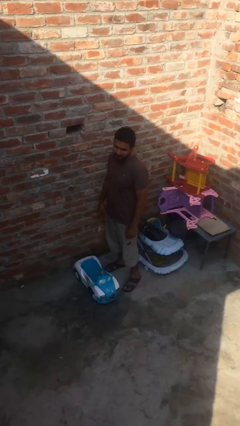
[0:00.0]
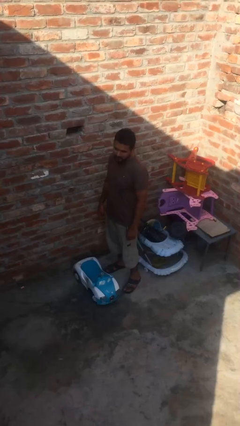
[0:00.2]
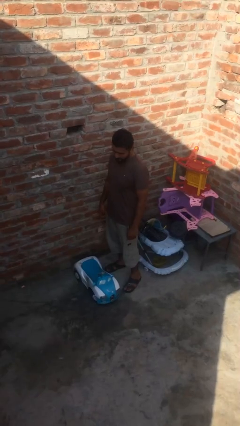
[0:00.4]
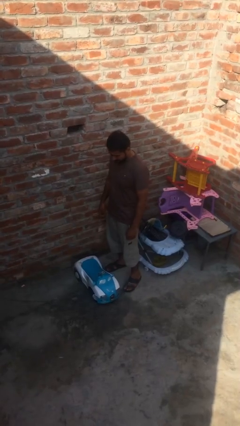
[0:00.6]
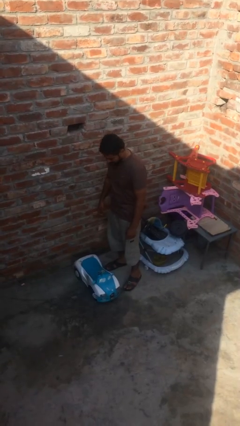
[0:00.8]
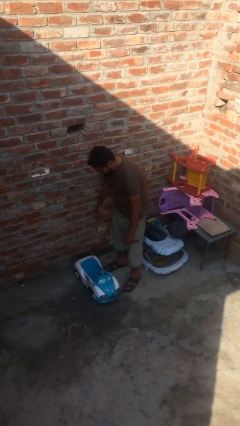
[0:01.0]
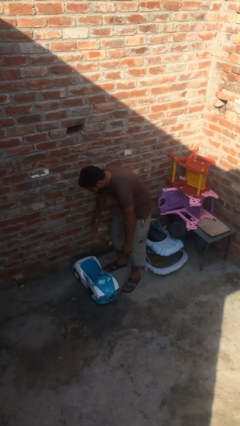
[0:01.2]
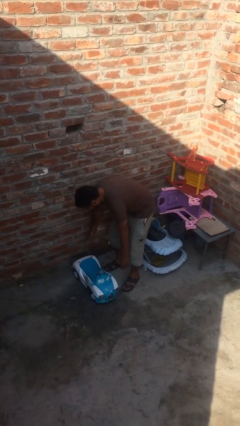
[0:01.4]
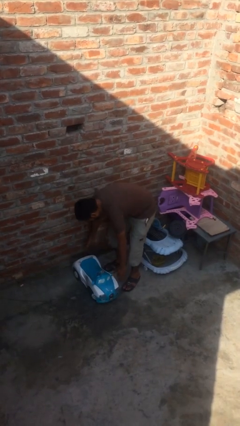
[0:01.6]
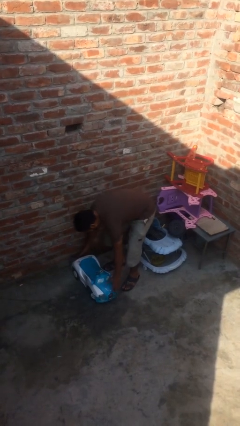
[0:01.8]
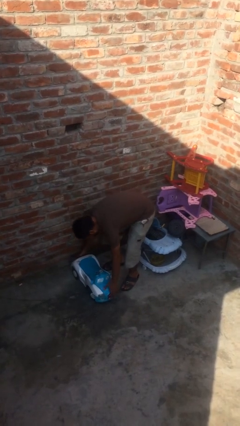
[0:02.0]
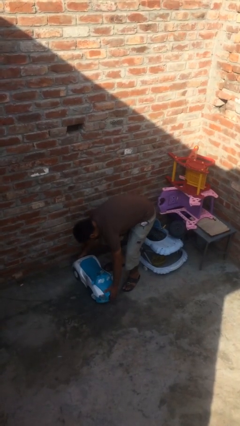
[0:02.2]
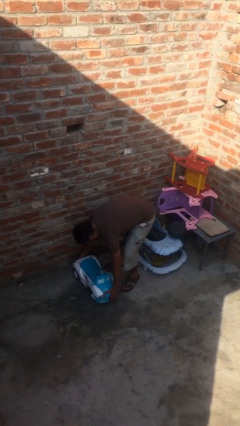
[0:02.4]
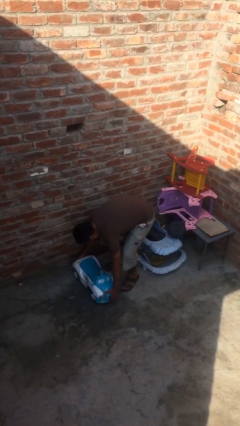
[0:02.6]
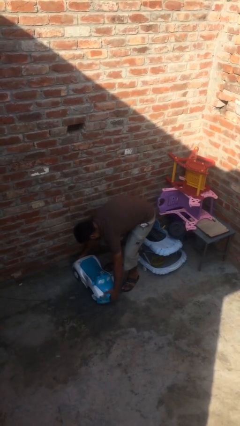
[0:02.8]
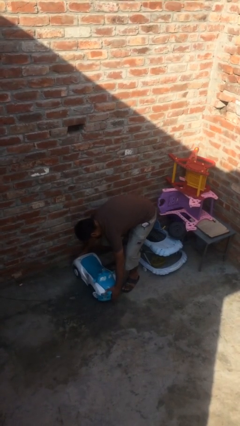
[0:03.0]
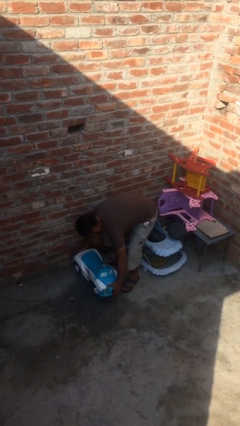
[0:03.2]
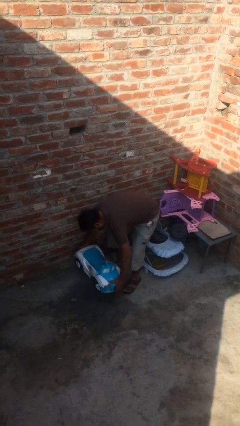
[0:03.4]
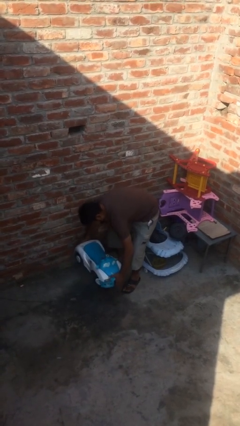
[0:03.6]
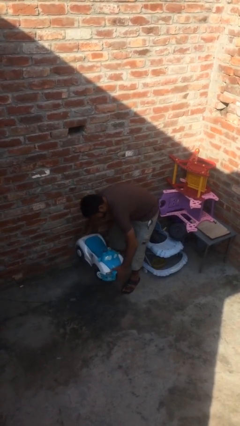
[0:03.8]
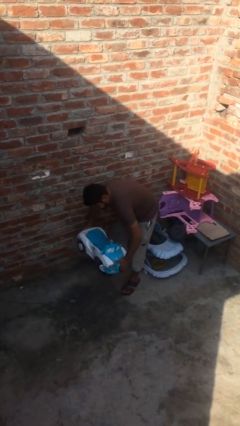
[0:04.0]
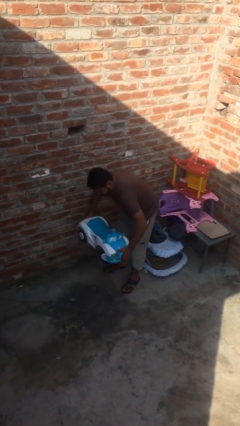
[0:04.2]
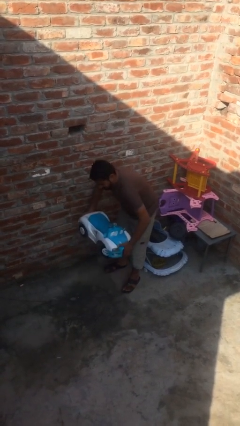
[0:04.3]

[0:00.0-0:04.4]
person picks up object from floor

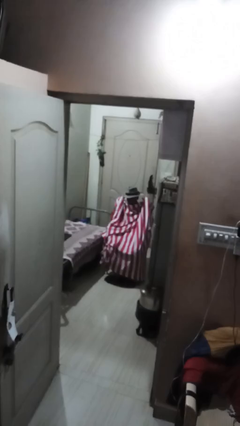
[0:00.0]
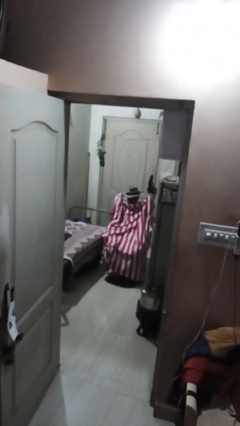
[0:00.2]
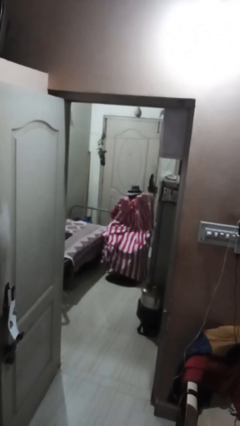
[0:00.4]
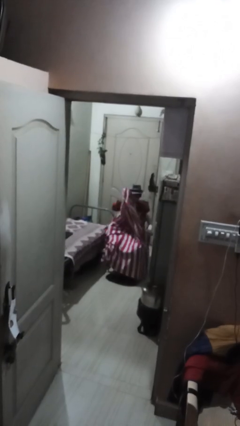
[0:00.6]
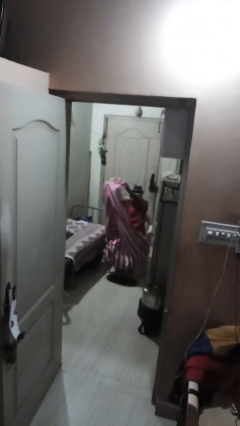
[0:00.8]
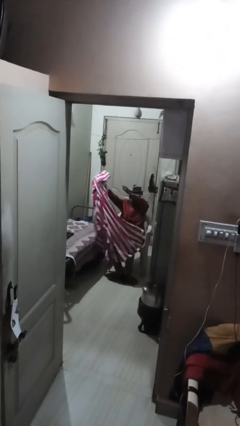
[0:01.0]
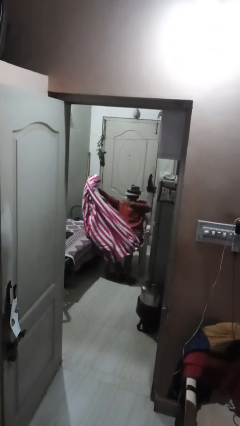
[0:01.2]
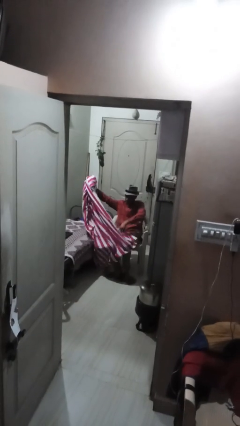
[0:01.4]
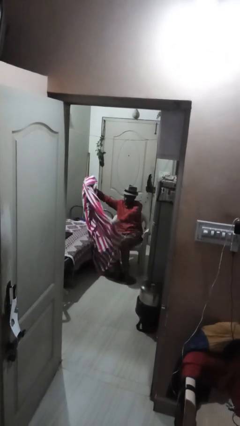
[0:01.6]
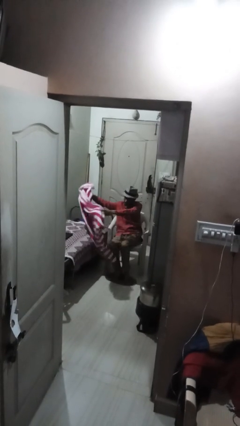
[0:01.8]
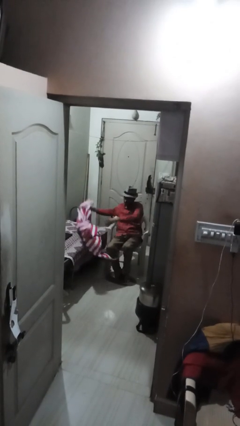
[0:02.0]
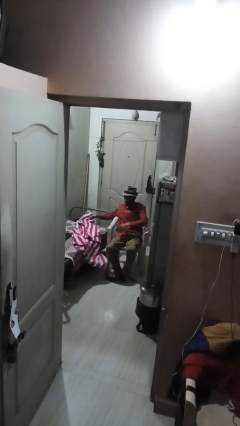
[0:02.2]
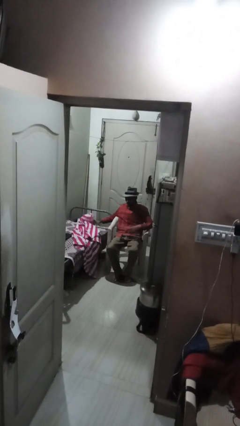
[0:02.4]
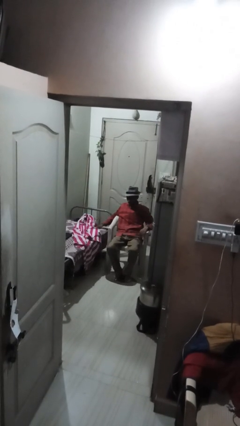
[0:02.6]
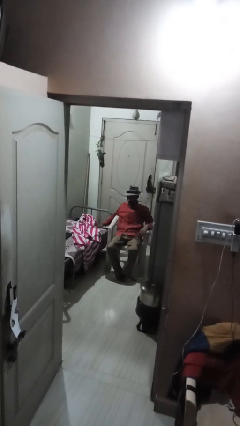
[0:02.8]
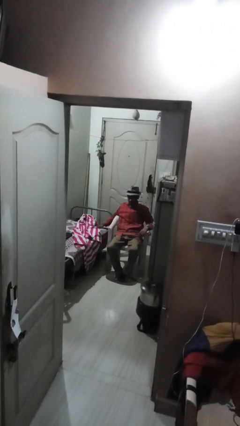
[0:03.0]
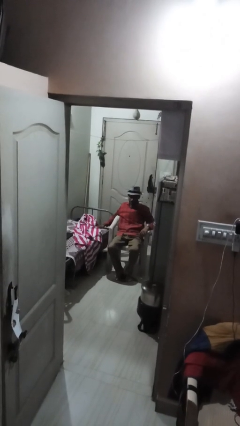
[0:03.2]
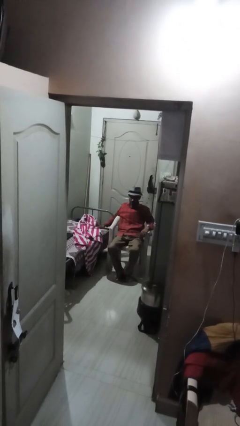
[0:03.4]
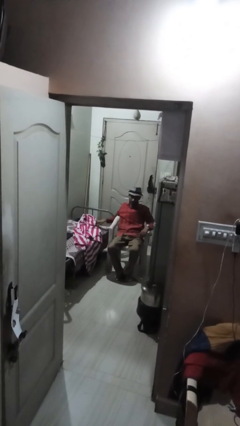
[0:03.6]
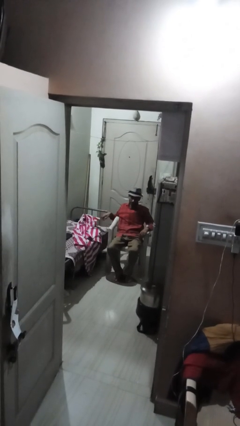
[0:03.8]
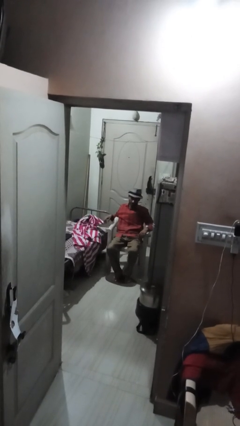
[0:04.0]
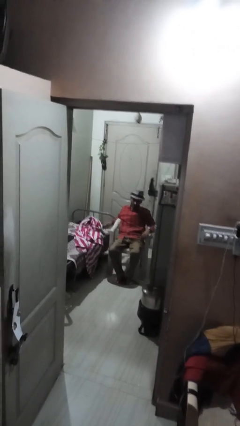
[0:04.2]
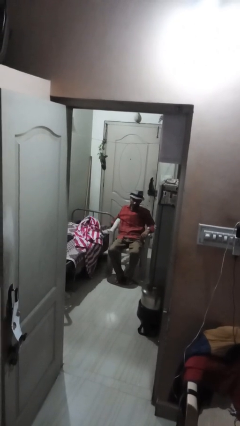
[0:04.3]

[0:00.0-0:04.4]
person uncovers with blanket

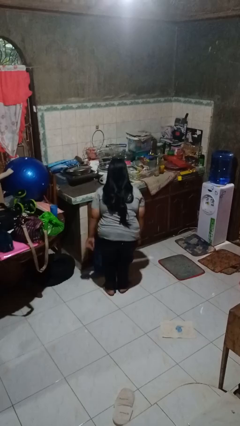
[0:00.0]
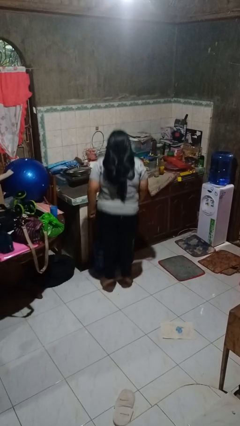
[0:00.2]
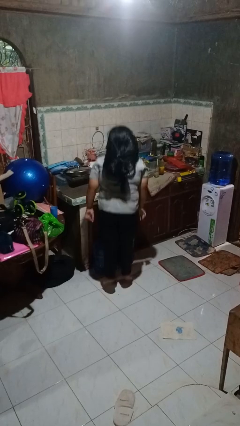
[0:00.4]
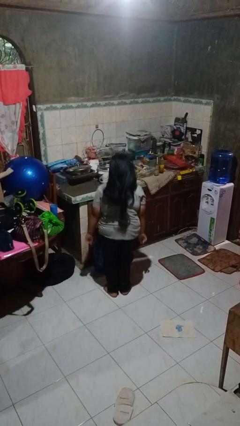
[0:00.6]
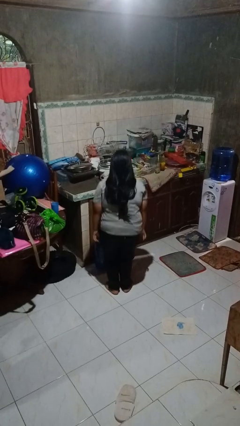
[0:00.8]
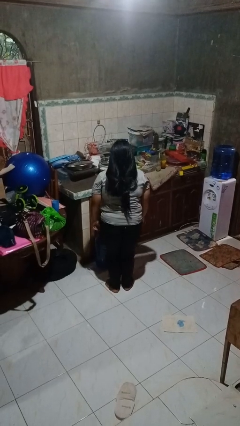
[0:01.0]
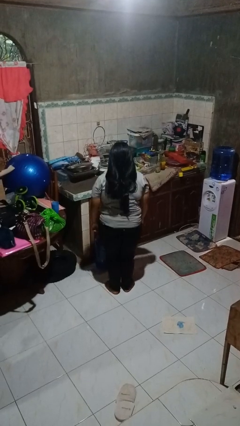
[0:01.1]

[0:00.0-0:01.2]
person jumps

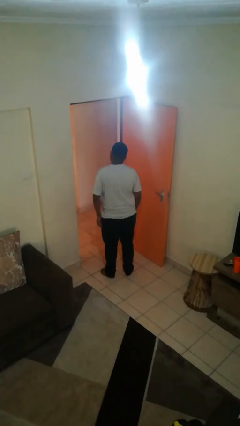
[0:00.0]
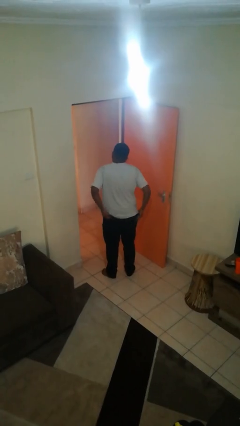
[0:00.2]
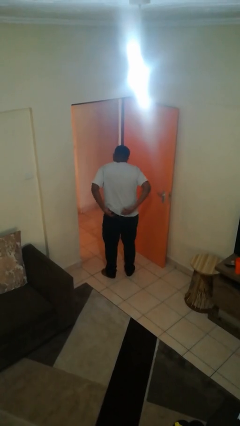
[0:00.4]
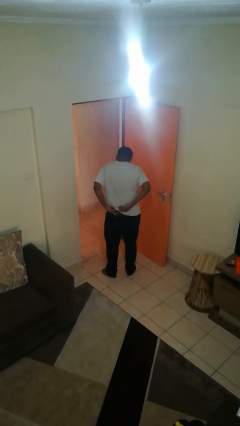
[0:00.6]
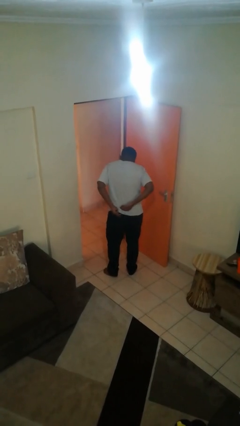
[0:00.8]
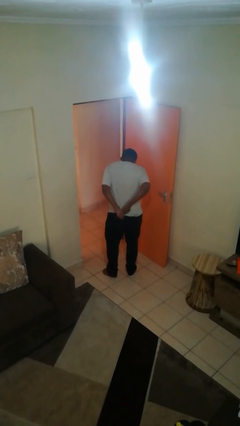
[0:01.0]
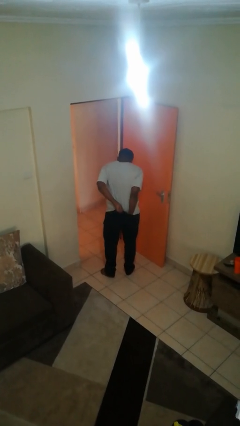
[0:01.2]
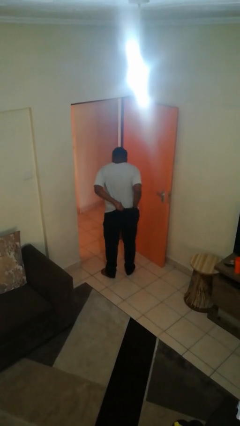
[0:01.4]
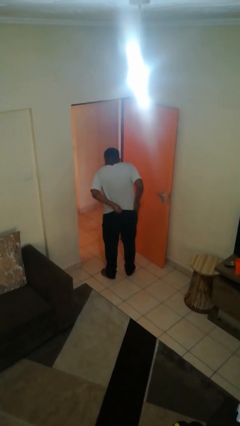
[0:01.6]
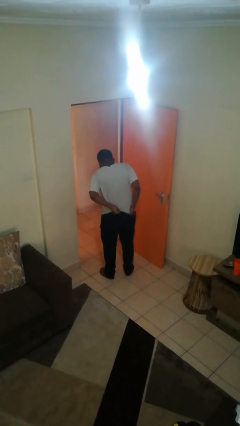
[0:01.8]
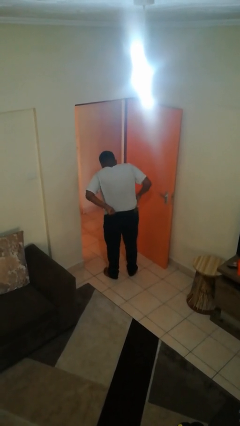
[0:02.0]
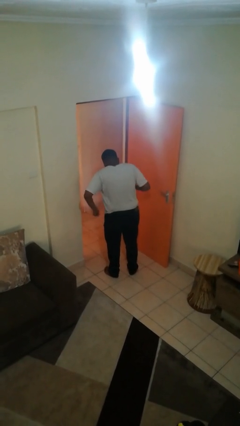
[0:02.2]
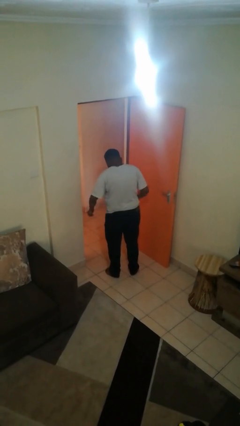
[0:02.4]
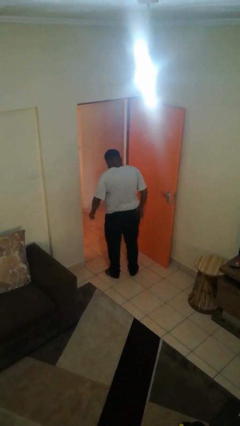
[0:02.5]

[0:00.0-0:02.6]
person tucks in shirt

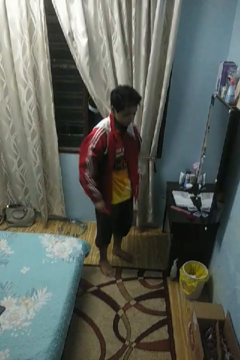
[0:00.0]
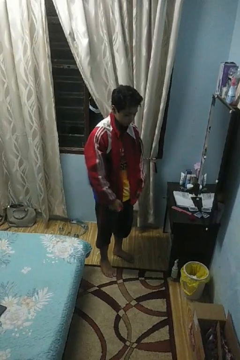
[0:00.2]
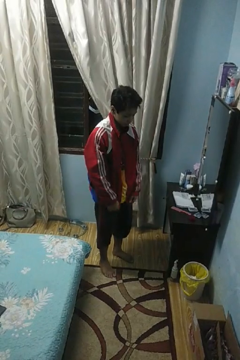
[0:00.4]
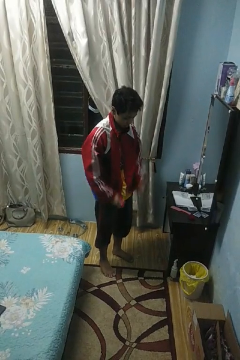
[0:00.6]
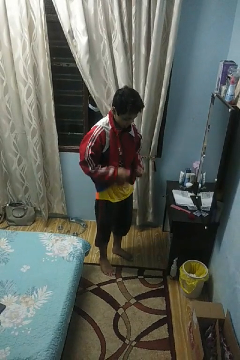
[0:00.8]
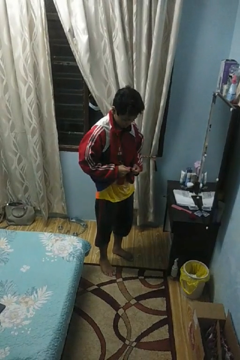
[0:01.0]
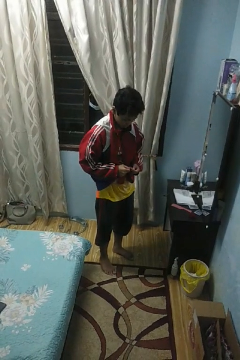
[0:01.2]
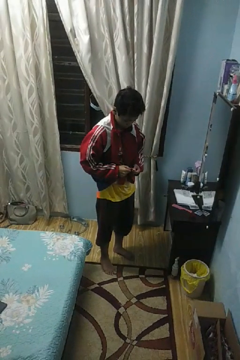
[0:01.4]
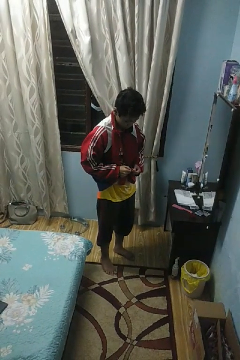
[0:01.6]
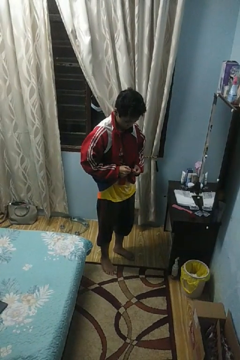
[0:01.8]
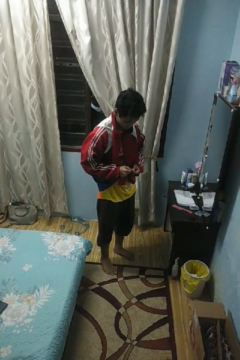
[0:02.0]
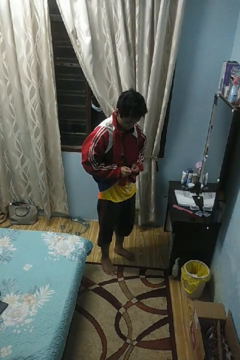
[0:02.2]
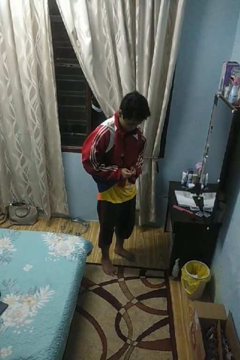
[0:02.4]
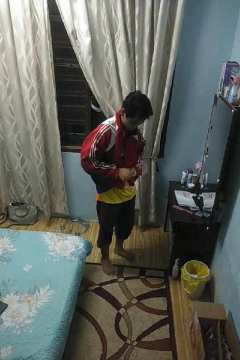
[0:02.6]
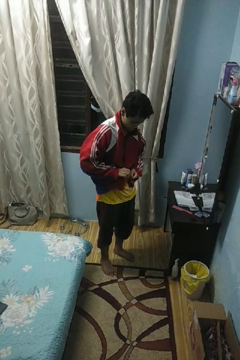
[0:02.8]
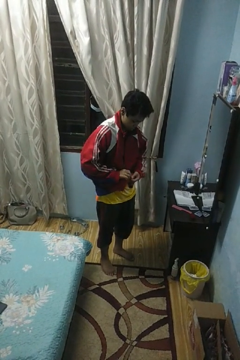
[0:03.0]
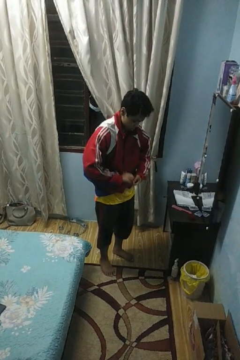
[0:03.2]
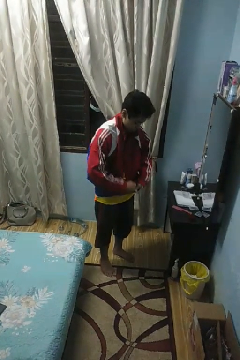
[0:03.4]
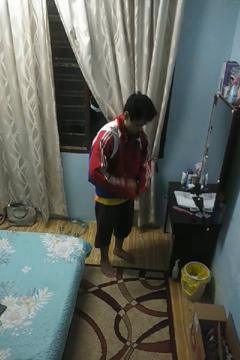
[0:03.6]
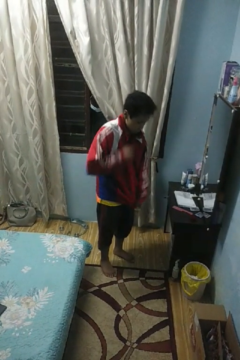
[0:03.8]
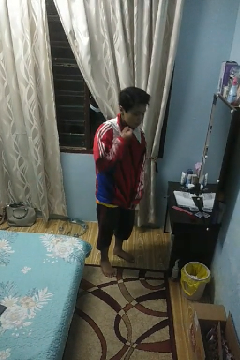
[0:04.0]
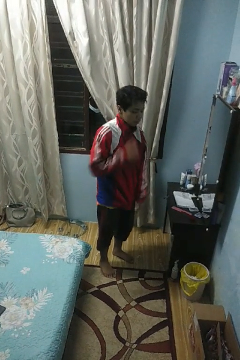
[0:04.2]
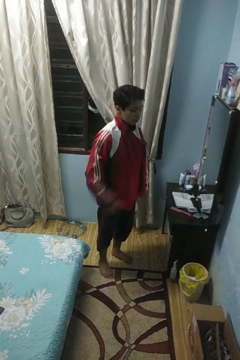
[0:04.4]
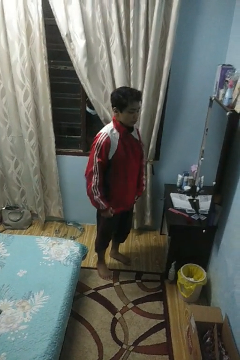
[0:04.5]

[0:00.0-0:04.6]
person zips up jacket

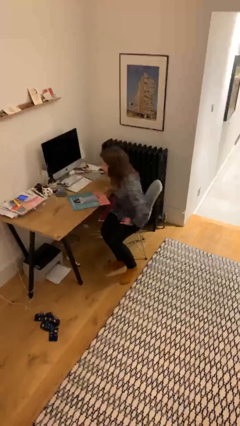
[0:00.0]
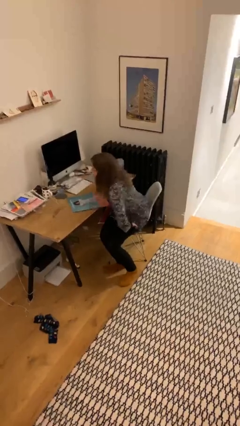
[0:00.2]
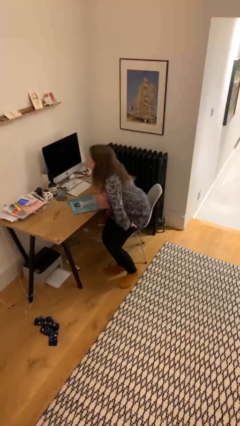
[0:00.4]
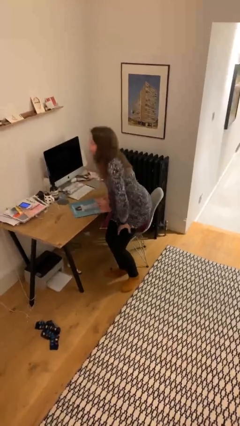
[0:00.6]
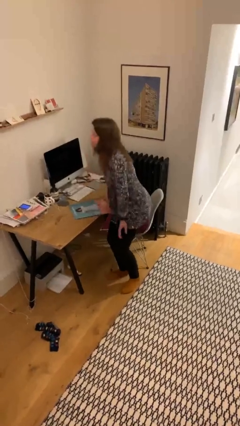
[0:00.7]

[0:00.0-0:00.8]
person stands up

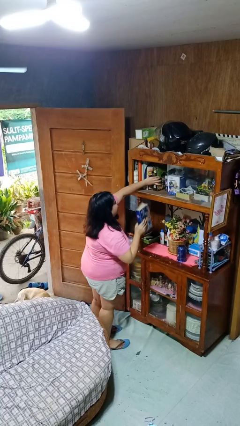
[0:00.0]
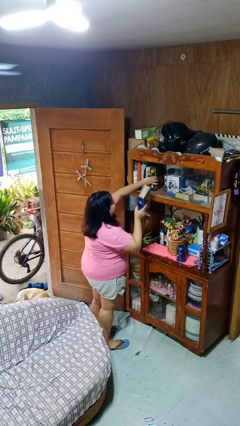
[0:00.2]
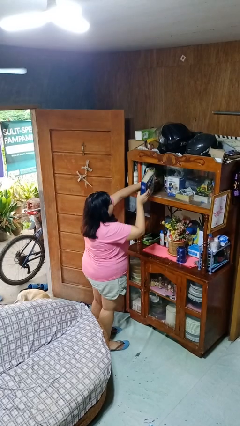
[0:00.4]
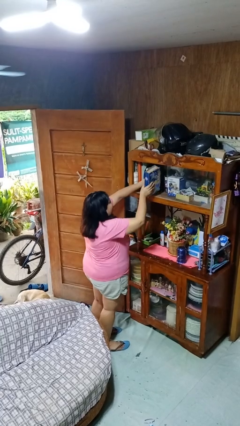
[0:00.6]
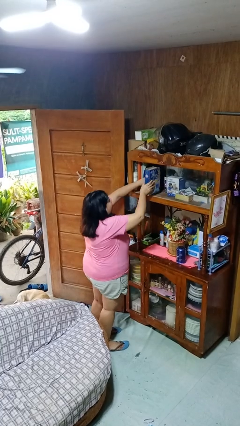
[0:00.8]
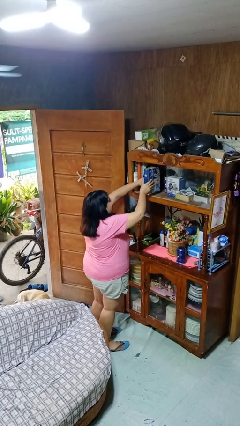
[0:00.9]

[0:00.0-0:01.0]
person puts down object on shelf
